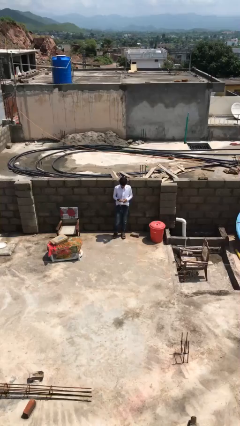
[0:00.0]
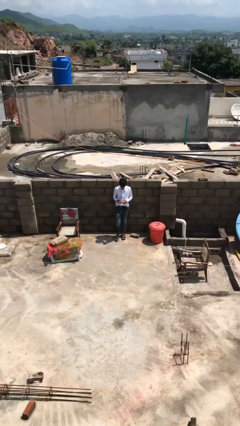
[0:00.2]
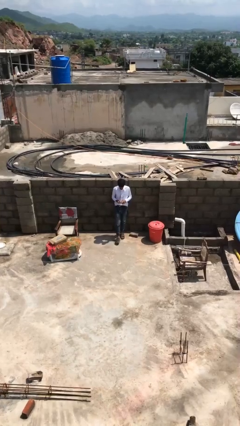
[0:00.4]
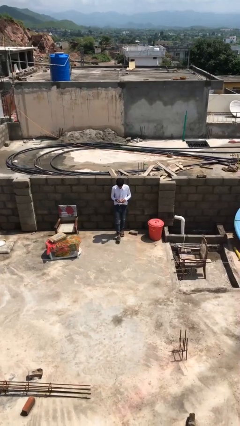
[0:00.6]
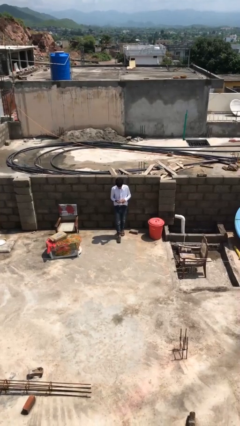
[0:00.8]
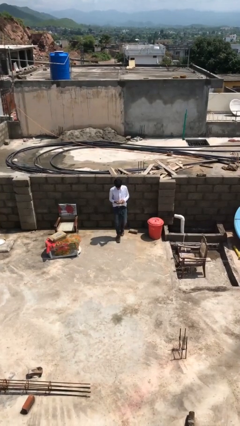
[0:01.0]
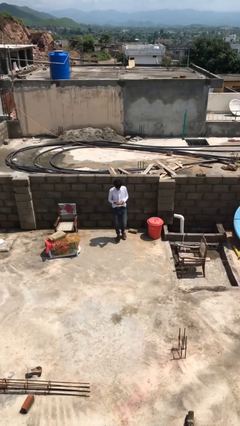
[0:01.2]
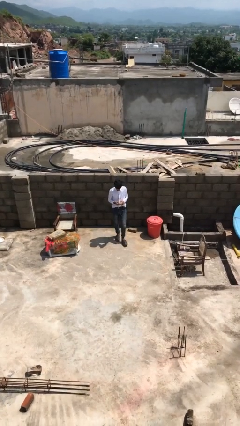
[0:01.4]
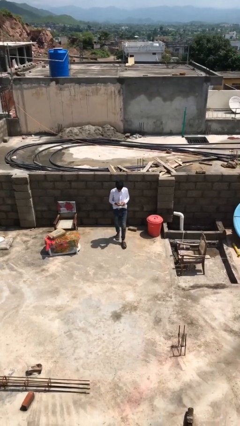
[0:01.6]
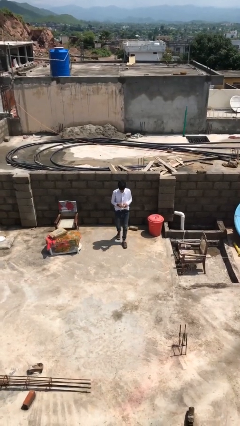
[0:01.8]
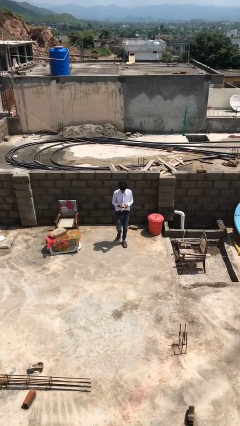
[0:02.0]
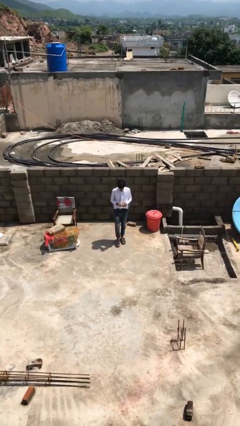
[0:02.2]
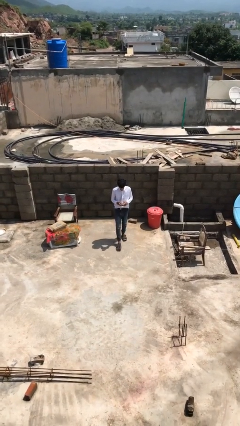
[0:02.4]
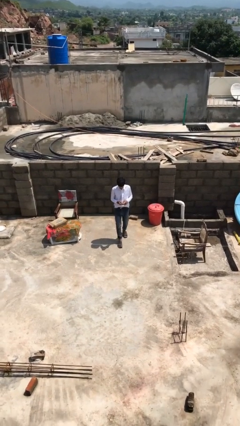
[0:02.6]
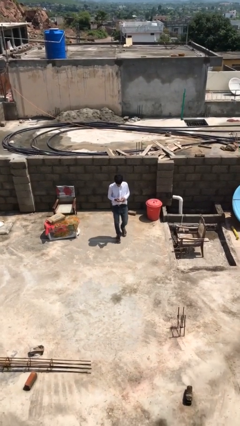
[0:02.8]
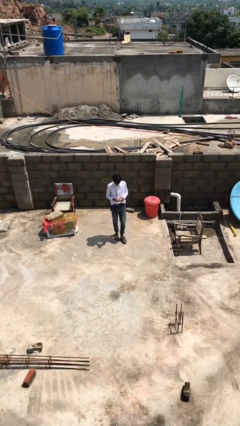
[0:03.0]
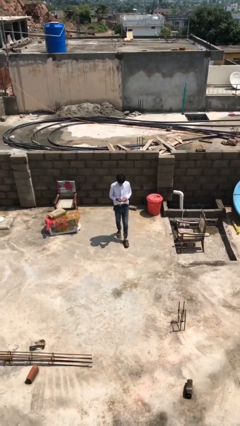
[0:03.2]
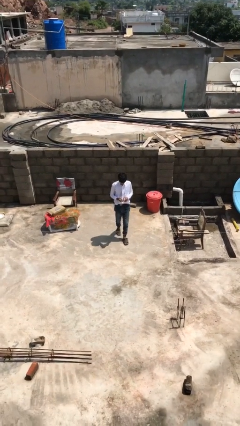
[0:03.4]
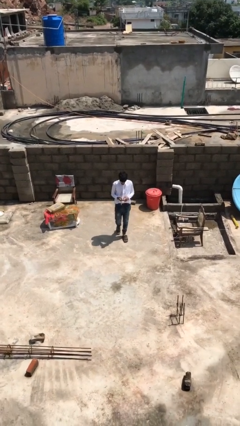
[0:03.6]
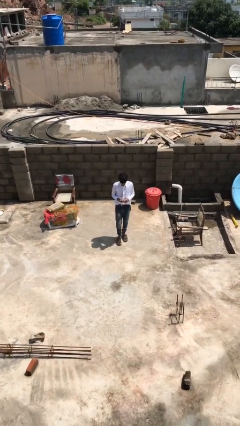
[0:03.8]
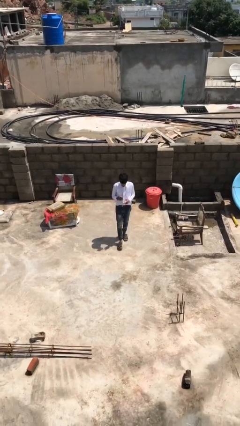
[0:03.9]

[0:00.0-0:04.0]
person texts on phone

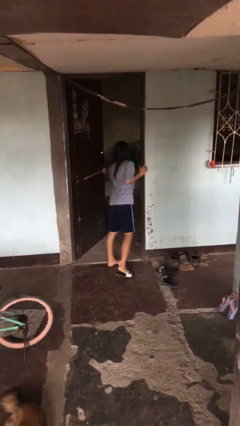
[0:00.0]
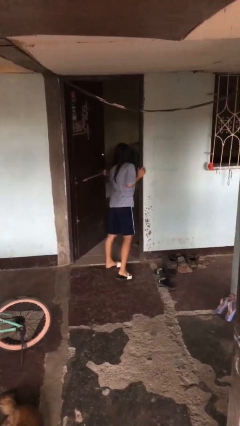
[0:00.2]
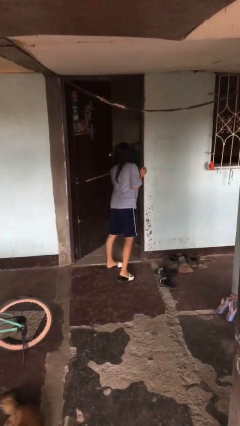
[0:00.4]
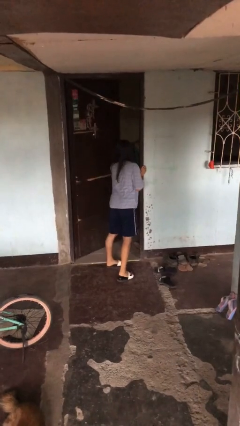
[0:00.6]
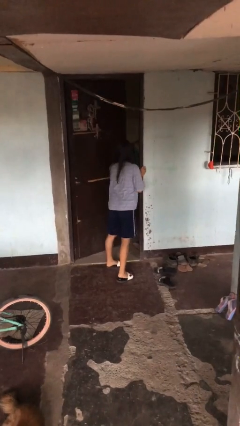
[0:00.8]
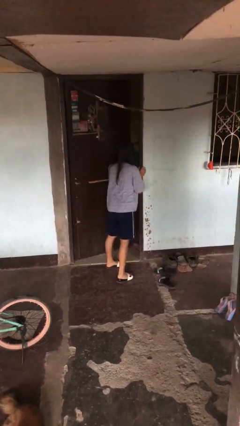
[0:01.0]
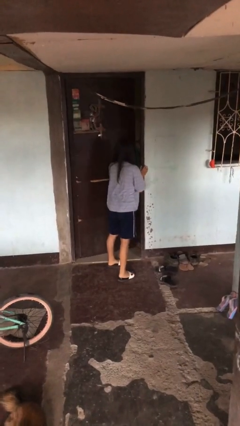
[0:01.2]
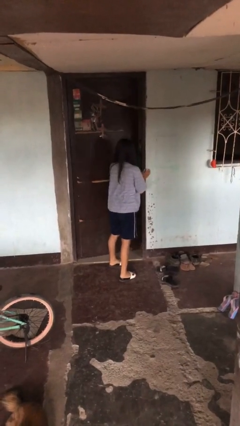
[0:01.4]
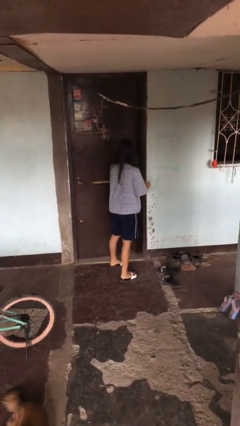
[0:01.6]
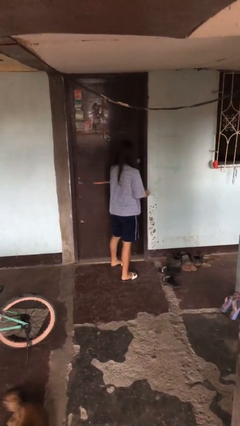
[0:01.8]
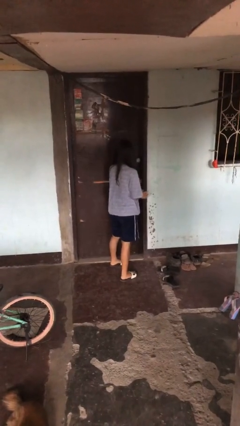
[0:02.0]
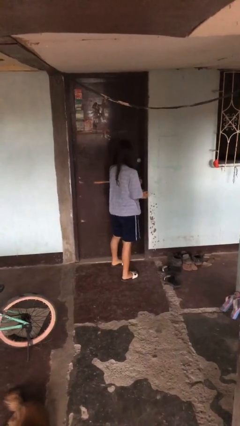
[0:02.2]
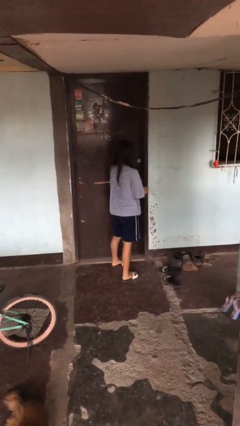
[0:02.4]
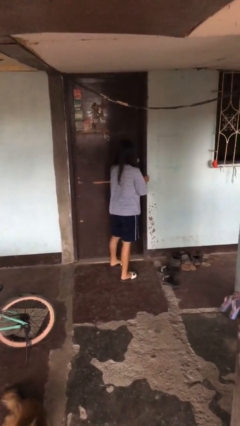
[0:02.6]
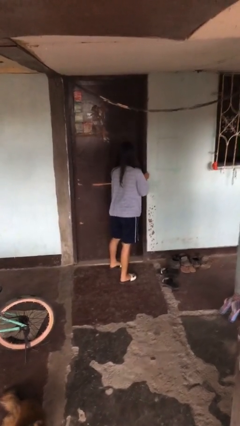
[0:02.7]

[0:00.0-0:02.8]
person closes facility door

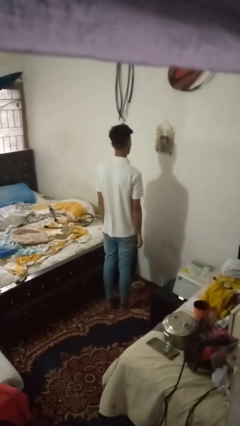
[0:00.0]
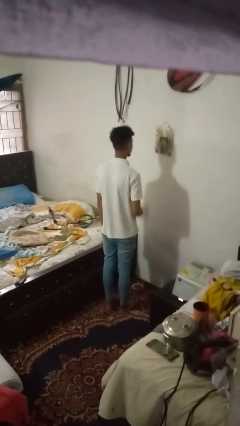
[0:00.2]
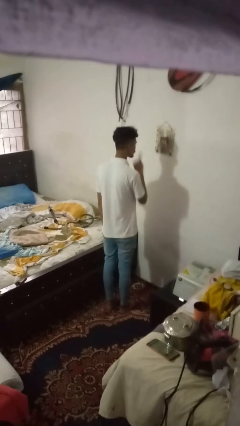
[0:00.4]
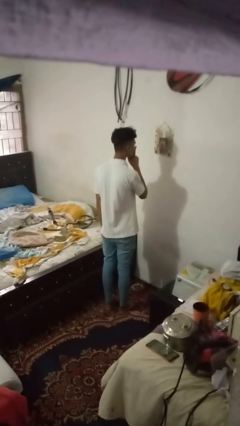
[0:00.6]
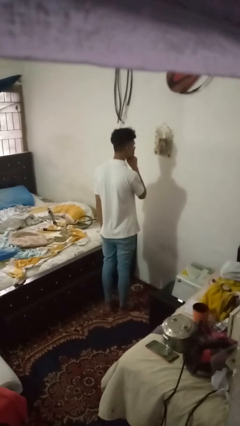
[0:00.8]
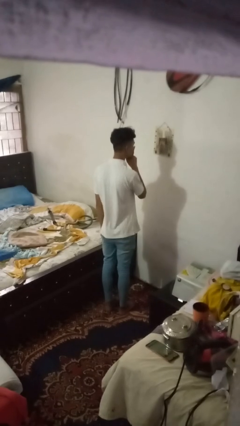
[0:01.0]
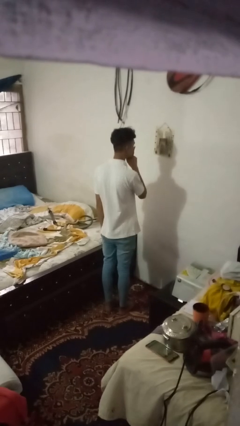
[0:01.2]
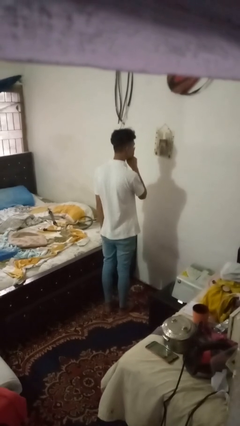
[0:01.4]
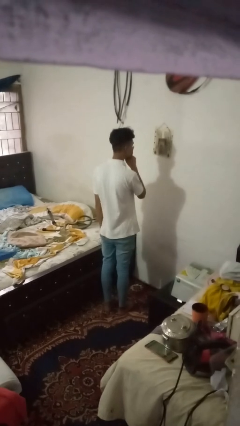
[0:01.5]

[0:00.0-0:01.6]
person gestures be quiet

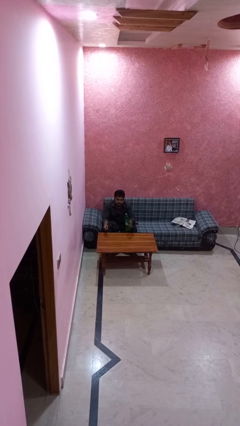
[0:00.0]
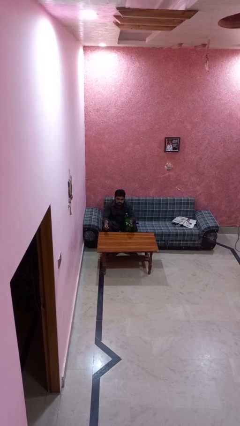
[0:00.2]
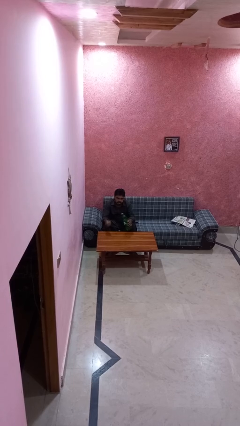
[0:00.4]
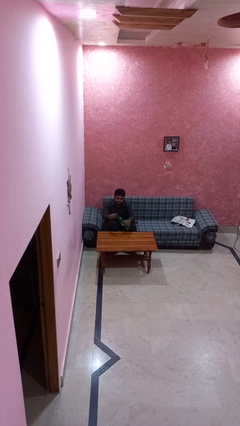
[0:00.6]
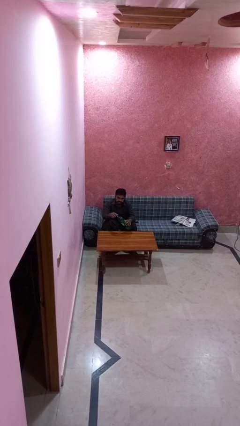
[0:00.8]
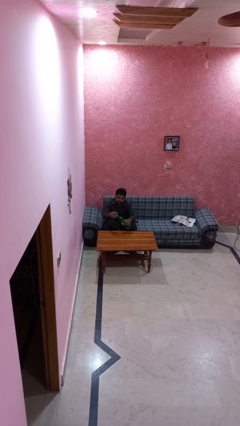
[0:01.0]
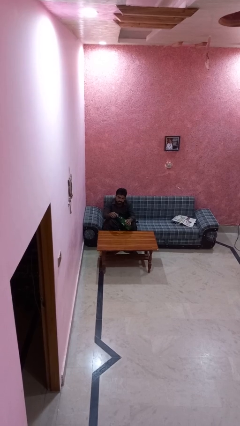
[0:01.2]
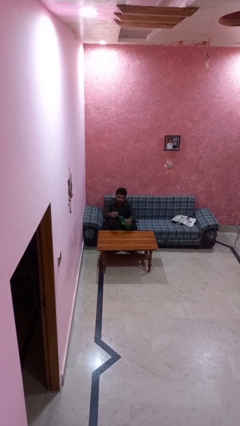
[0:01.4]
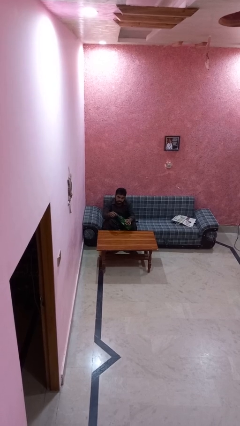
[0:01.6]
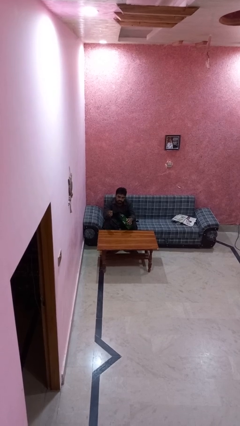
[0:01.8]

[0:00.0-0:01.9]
person unscrews lid from bottle

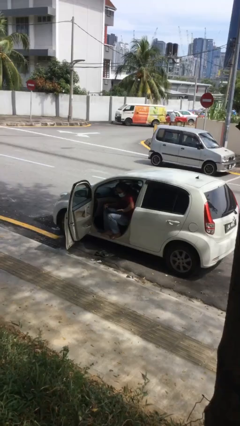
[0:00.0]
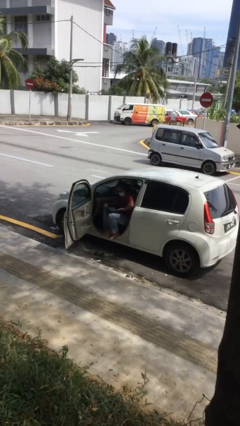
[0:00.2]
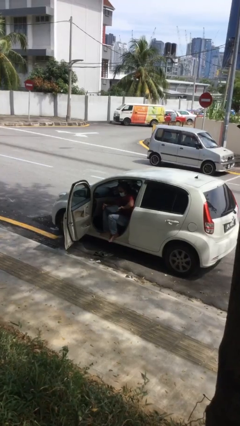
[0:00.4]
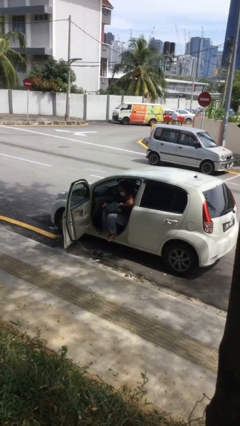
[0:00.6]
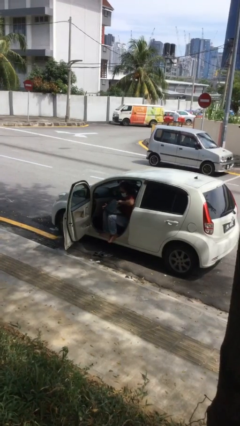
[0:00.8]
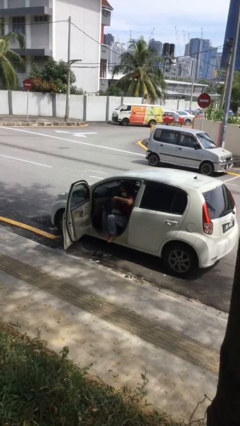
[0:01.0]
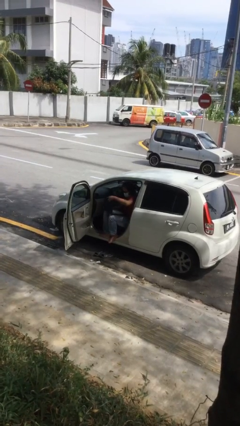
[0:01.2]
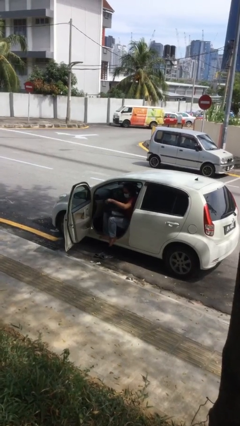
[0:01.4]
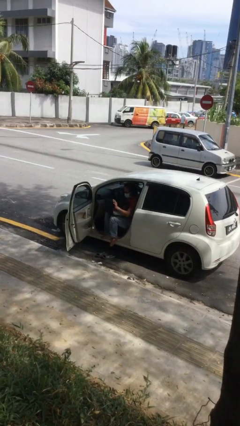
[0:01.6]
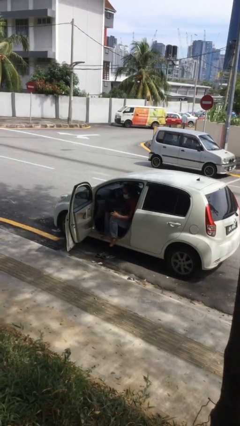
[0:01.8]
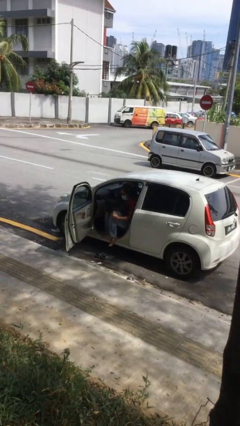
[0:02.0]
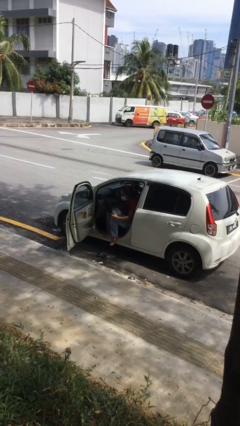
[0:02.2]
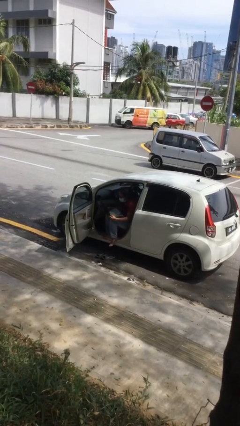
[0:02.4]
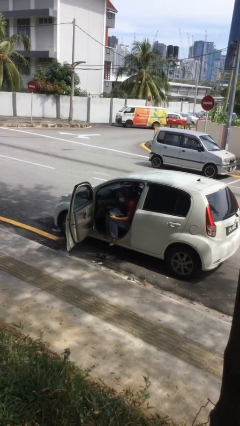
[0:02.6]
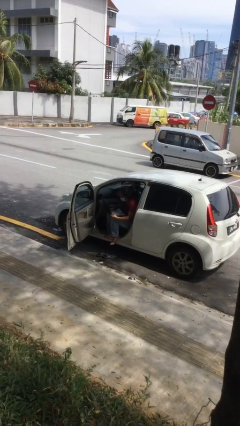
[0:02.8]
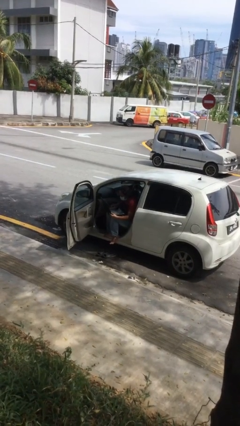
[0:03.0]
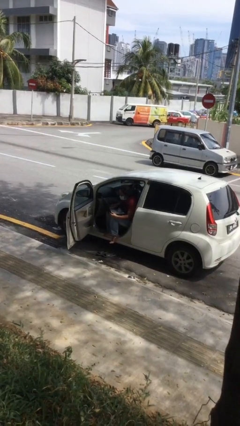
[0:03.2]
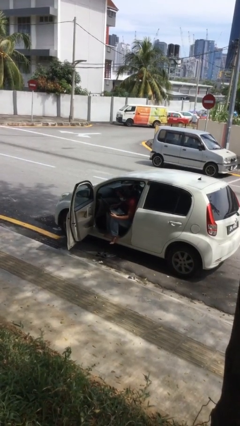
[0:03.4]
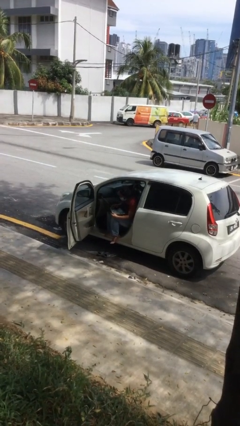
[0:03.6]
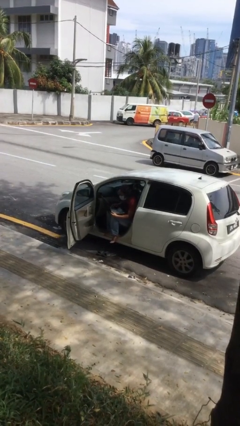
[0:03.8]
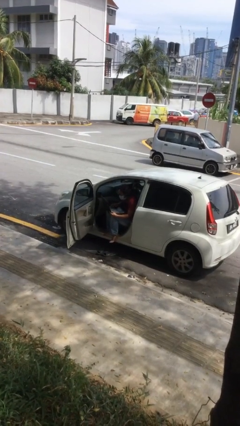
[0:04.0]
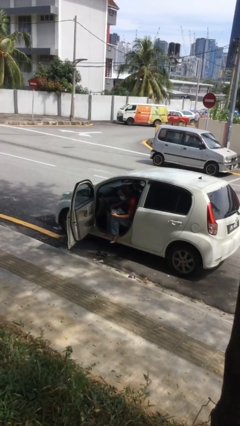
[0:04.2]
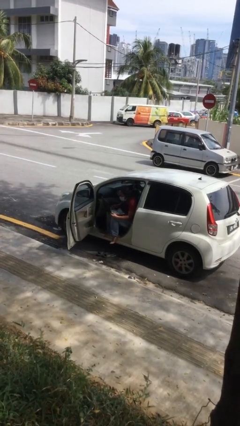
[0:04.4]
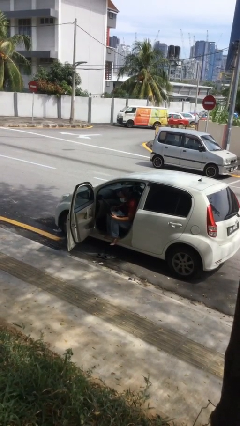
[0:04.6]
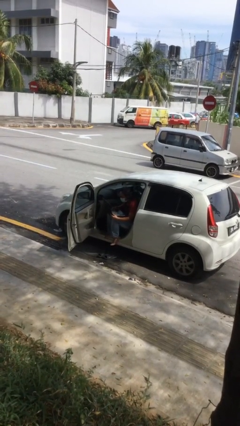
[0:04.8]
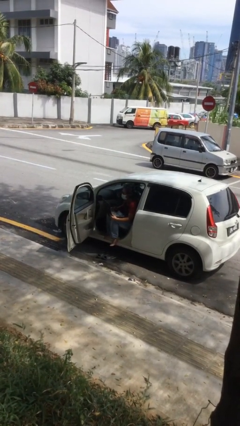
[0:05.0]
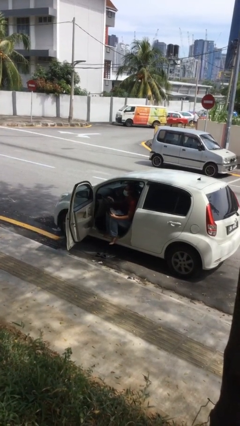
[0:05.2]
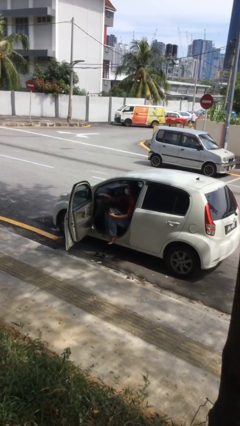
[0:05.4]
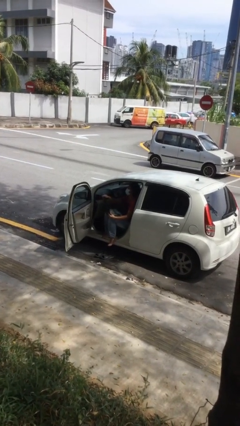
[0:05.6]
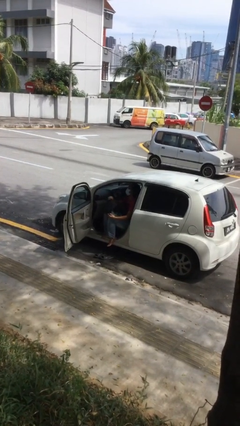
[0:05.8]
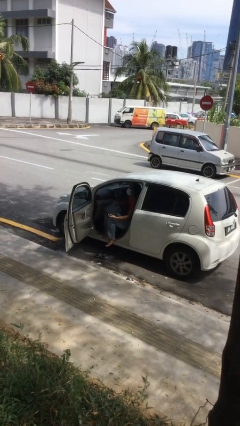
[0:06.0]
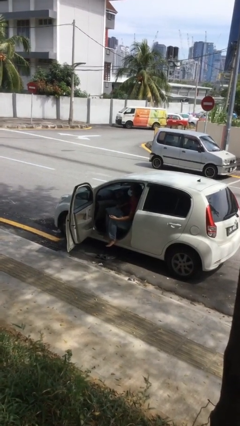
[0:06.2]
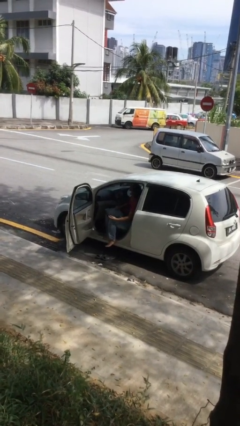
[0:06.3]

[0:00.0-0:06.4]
person interacts with laptop

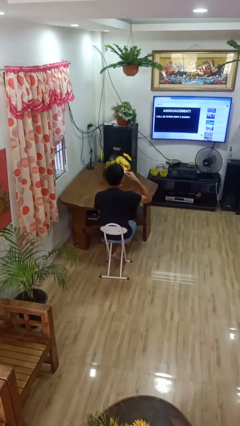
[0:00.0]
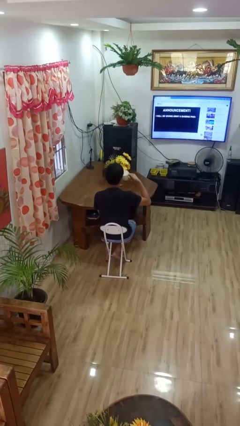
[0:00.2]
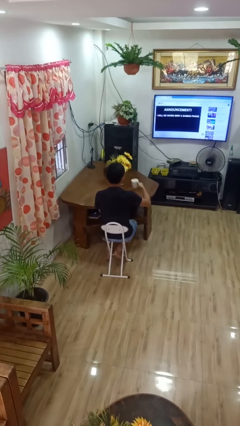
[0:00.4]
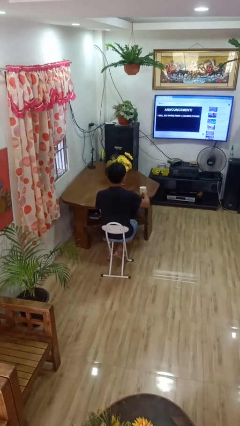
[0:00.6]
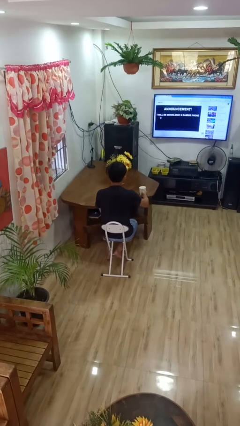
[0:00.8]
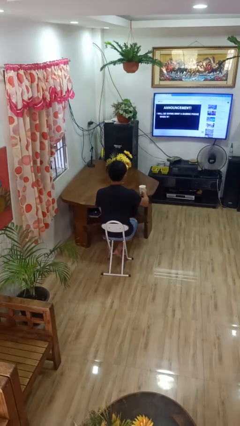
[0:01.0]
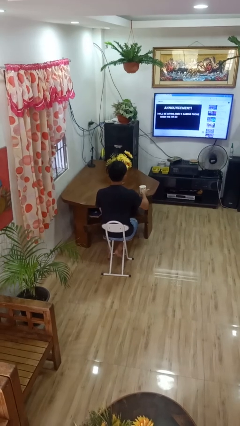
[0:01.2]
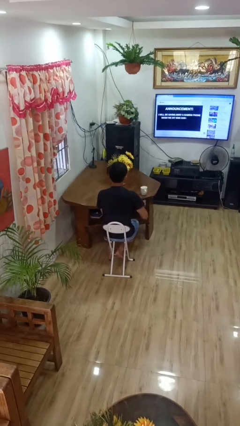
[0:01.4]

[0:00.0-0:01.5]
person puts down object on table
